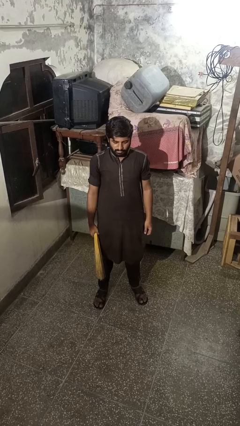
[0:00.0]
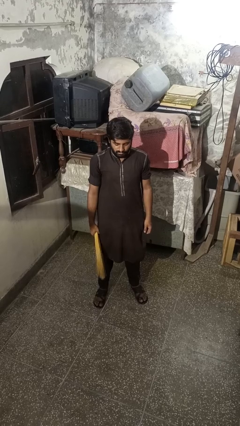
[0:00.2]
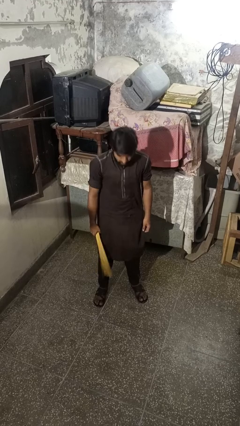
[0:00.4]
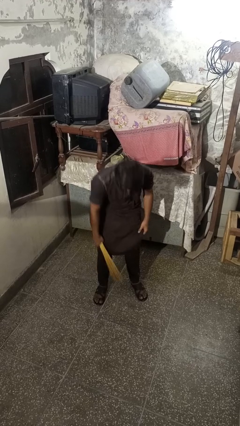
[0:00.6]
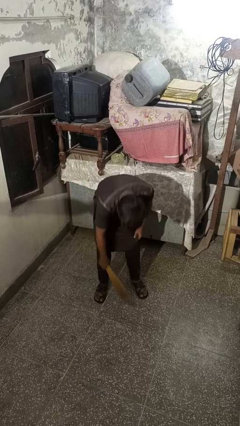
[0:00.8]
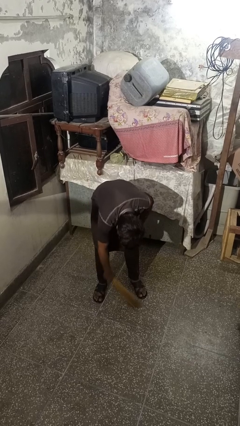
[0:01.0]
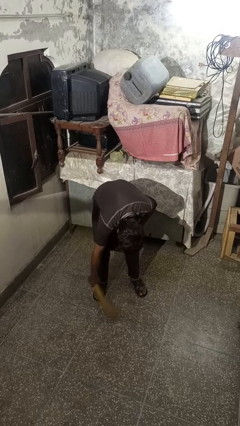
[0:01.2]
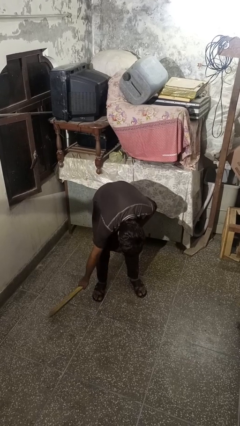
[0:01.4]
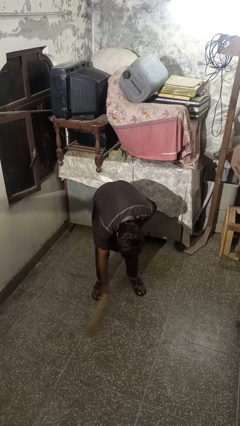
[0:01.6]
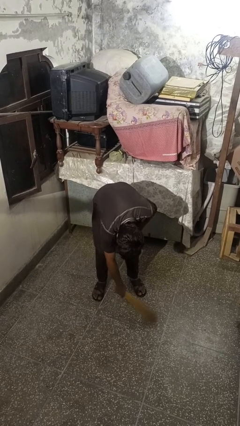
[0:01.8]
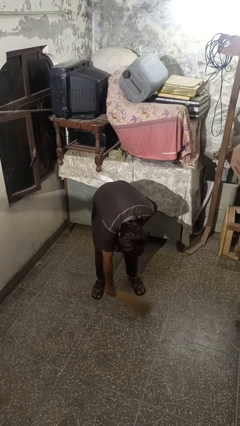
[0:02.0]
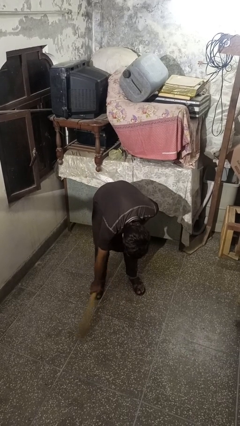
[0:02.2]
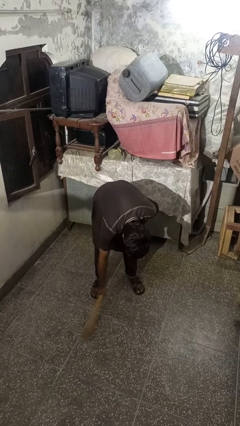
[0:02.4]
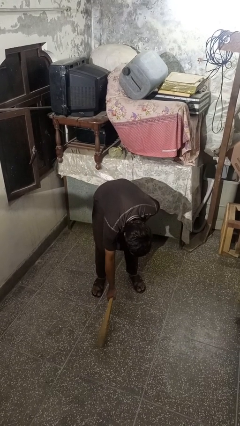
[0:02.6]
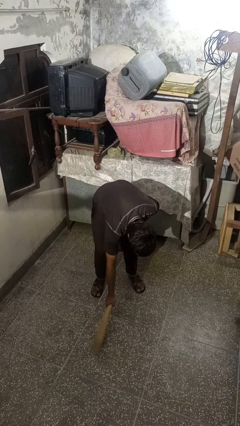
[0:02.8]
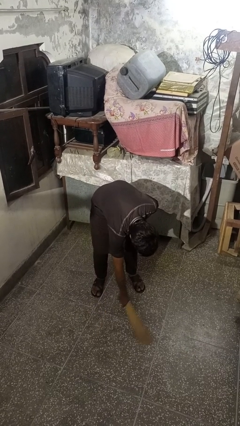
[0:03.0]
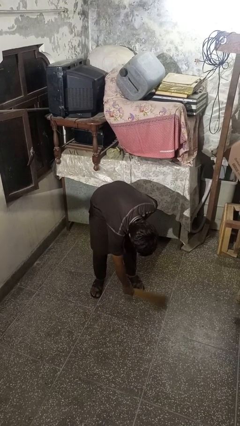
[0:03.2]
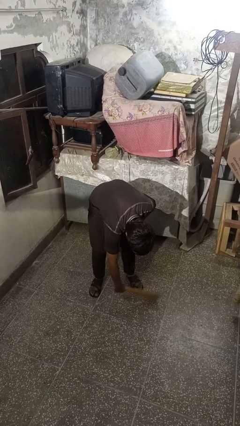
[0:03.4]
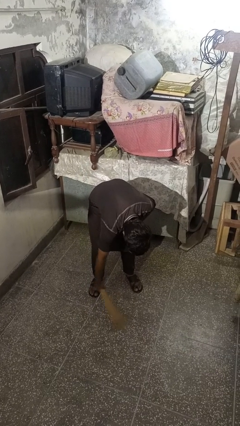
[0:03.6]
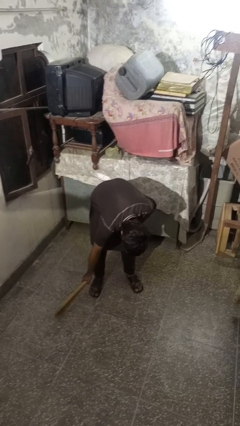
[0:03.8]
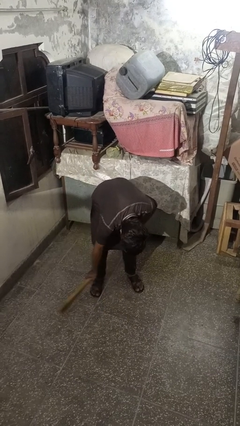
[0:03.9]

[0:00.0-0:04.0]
person sweeps floor

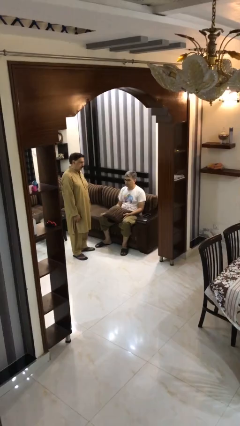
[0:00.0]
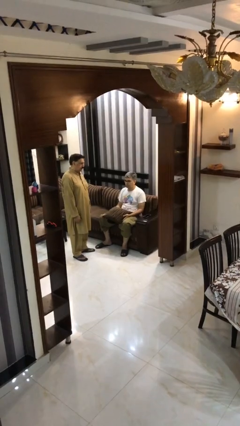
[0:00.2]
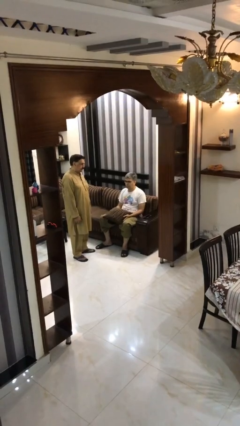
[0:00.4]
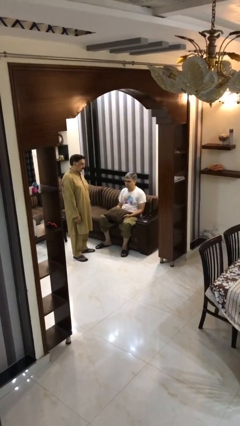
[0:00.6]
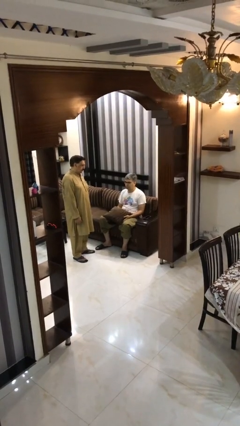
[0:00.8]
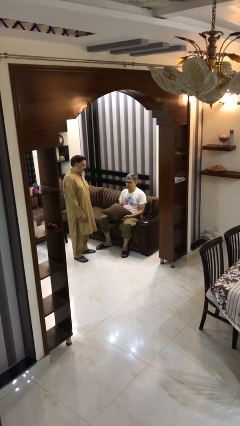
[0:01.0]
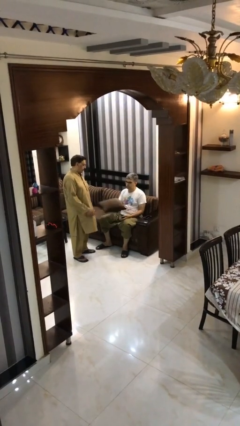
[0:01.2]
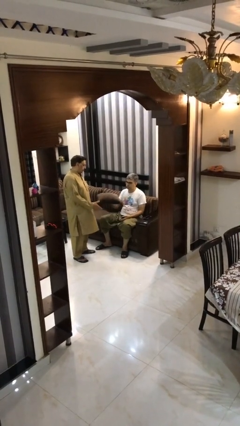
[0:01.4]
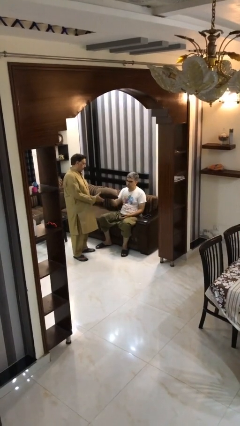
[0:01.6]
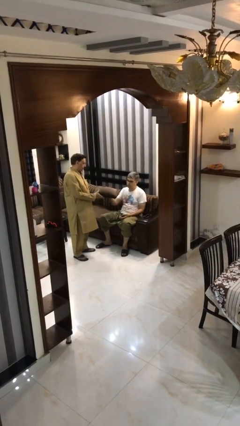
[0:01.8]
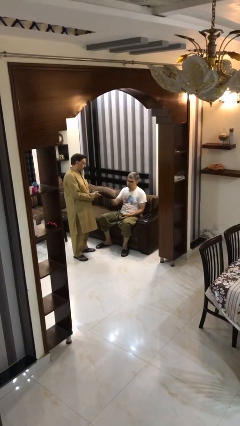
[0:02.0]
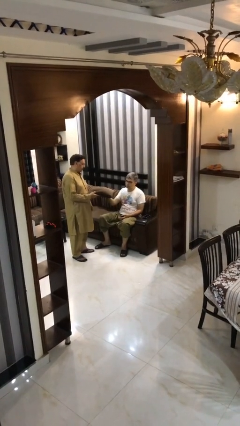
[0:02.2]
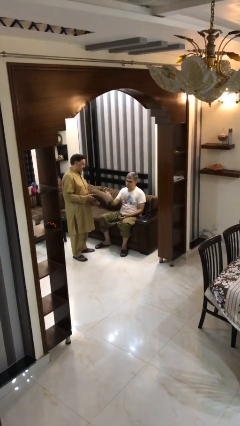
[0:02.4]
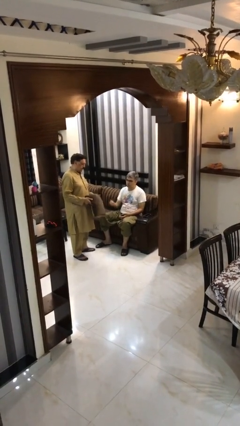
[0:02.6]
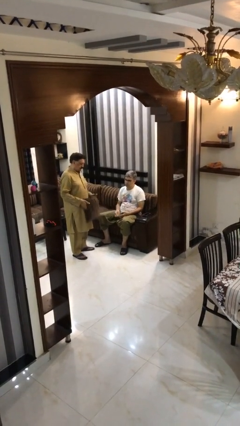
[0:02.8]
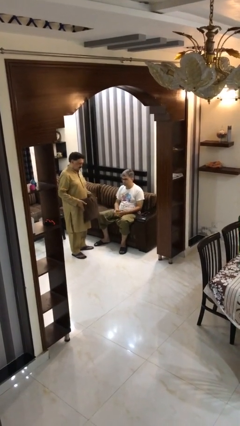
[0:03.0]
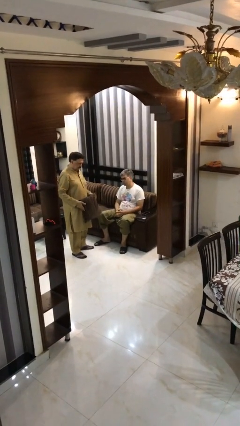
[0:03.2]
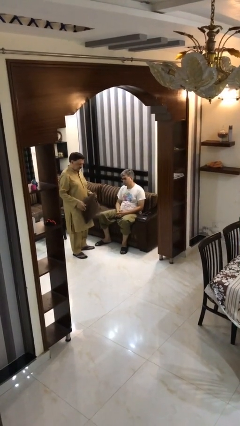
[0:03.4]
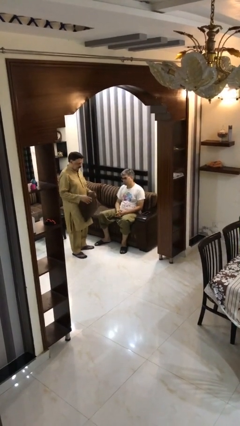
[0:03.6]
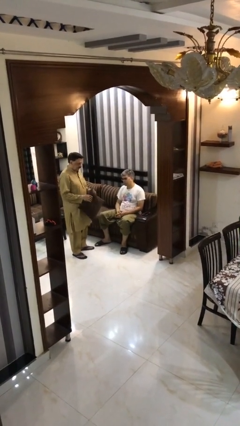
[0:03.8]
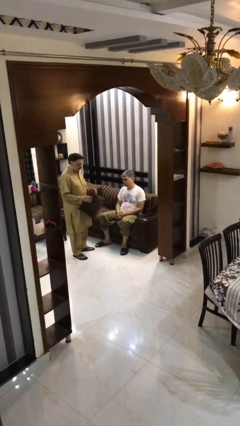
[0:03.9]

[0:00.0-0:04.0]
person transfers object to person

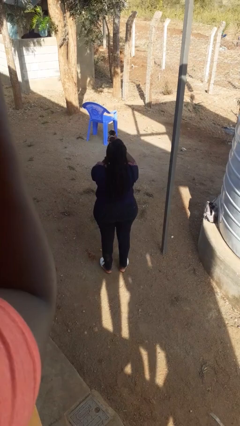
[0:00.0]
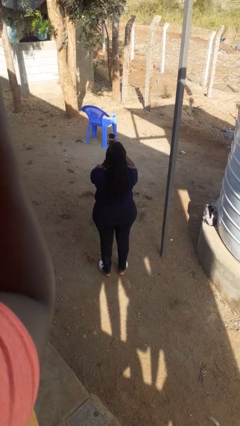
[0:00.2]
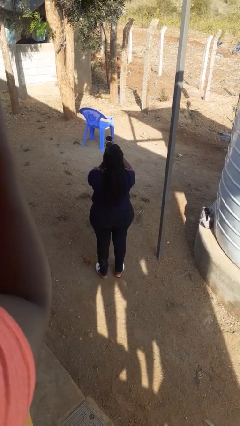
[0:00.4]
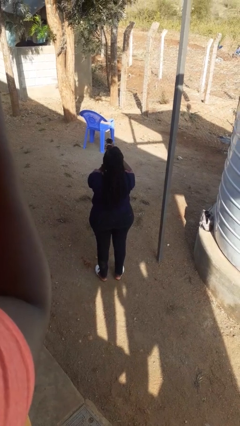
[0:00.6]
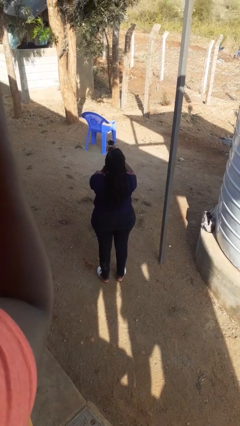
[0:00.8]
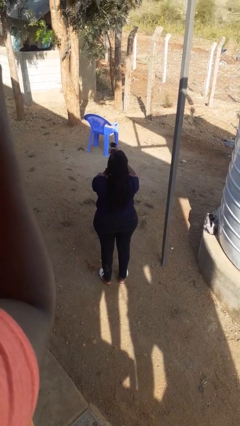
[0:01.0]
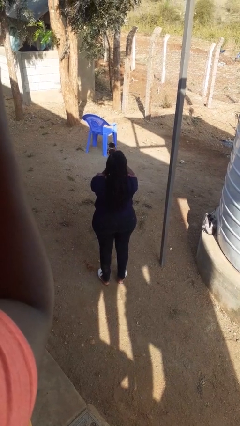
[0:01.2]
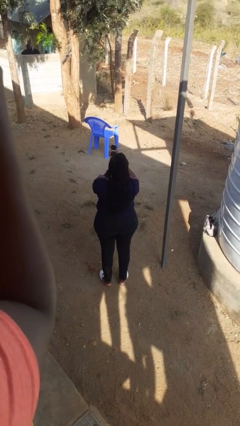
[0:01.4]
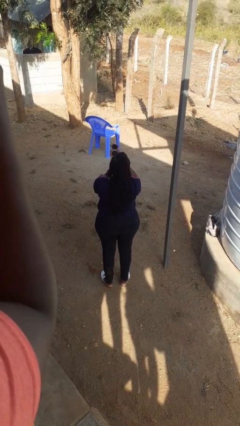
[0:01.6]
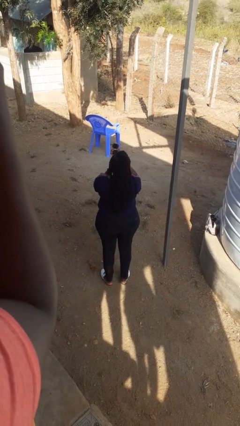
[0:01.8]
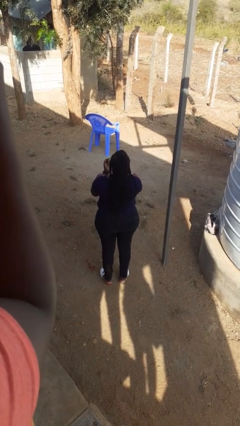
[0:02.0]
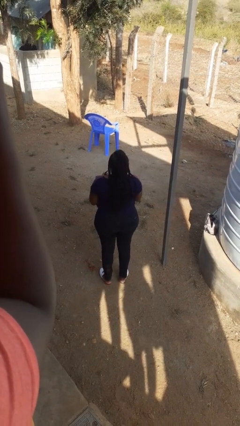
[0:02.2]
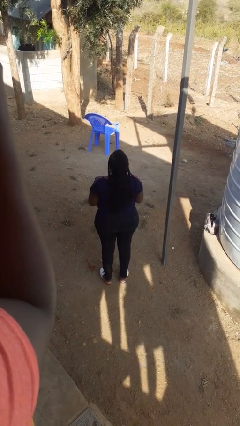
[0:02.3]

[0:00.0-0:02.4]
person applies eye makeup

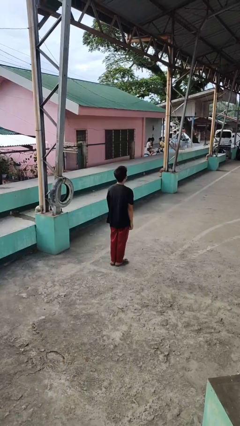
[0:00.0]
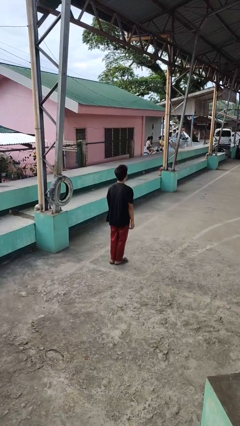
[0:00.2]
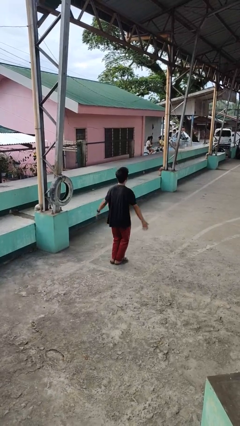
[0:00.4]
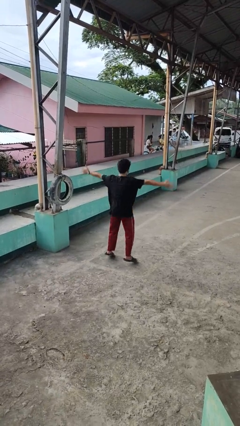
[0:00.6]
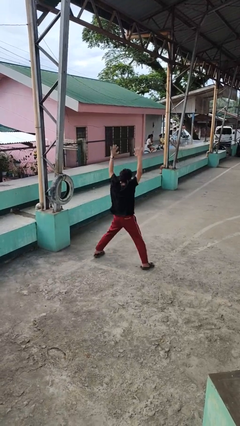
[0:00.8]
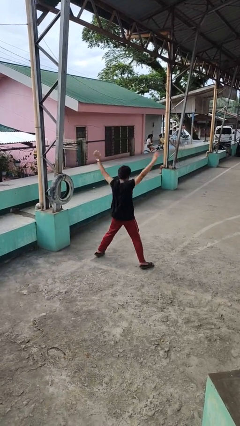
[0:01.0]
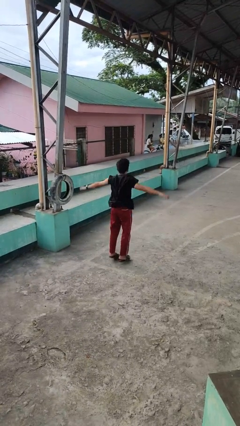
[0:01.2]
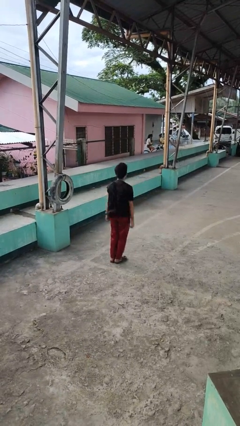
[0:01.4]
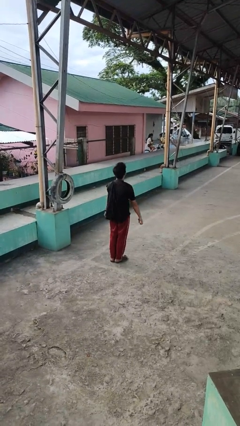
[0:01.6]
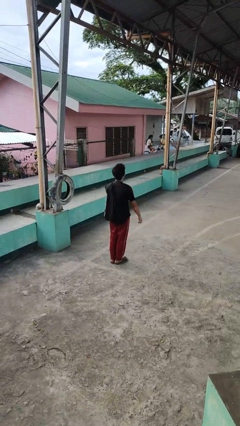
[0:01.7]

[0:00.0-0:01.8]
person exercises with jumping jacks

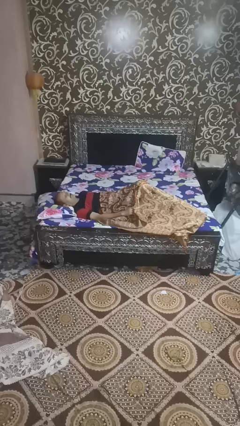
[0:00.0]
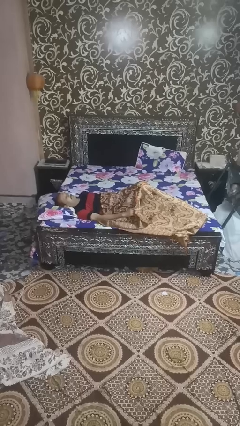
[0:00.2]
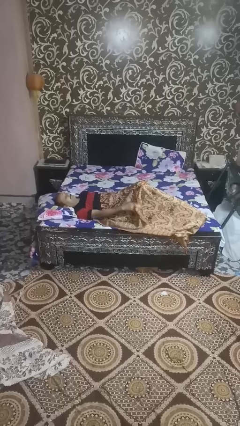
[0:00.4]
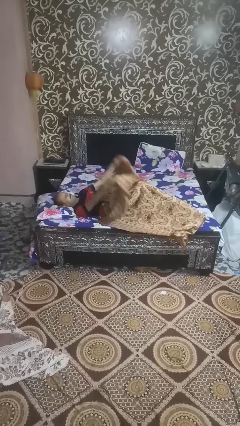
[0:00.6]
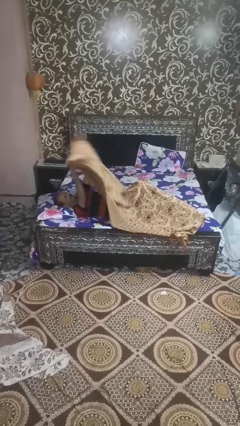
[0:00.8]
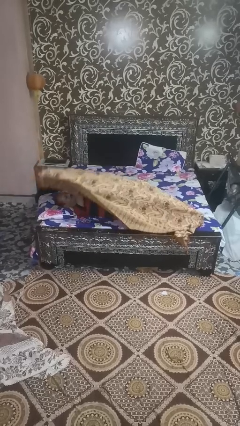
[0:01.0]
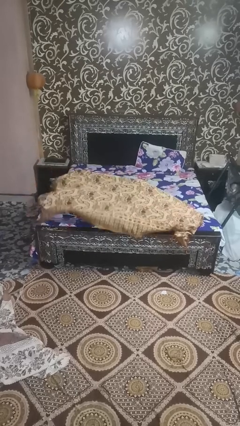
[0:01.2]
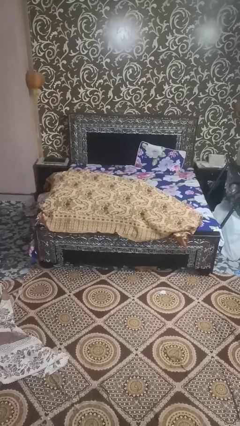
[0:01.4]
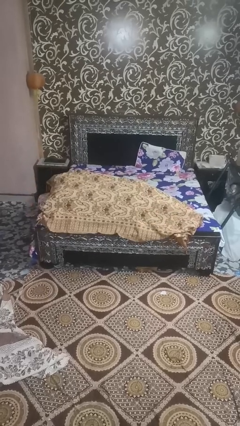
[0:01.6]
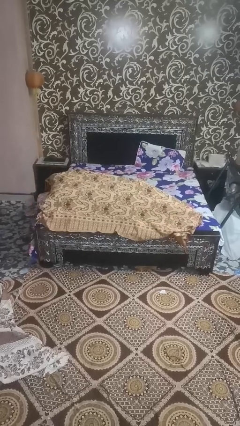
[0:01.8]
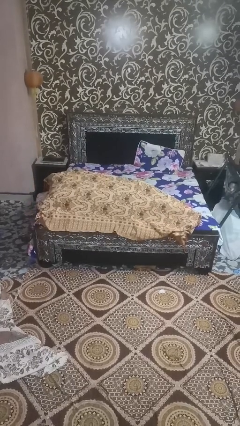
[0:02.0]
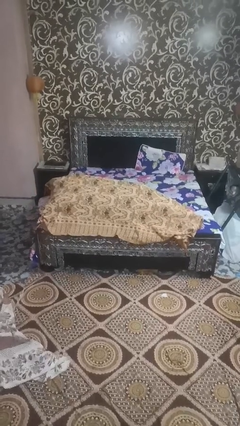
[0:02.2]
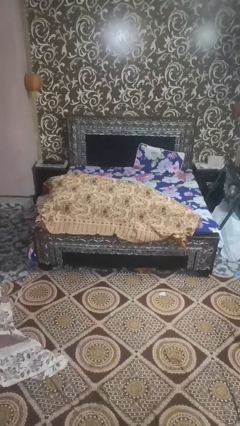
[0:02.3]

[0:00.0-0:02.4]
person covers with blanket

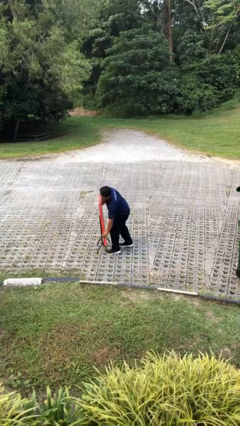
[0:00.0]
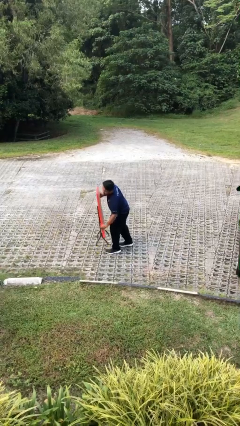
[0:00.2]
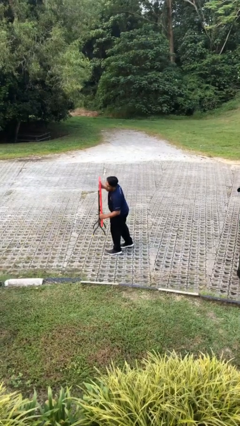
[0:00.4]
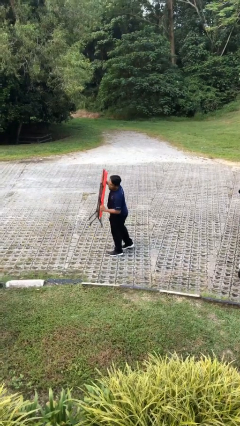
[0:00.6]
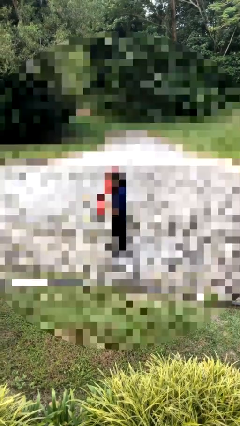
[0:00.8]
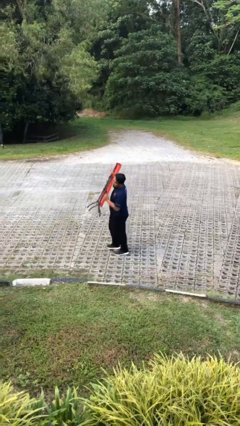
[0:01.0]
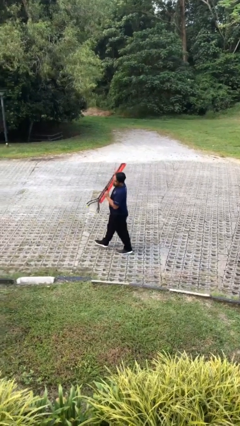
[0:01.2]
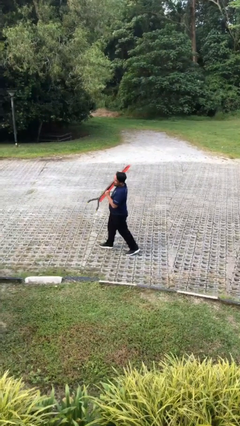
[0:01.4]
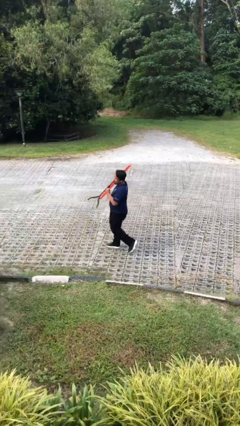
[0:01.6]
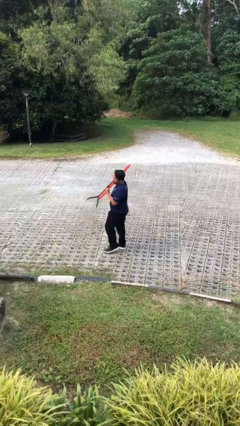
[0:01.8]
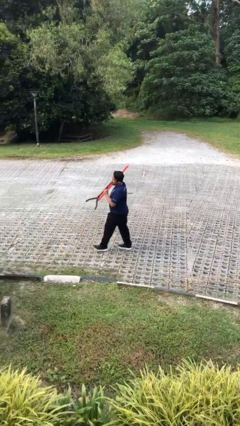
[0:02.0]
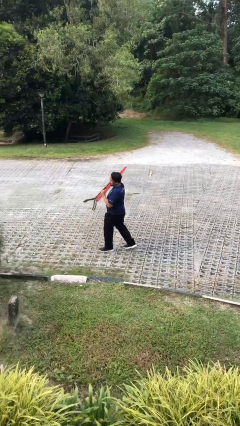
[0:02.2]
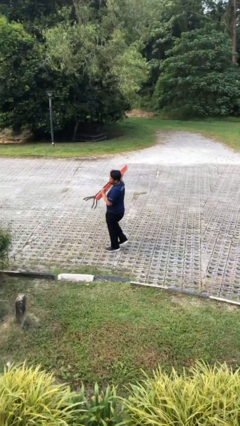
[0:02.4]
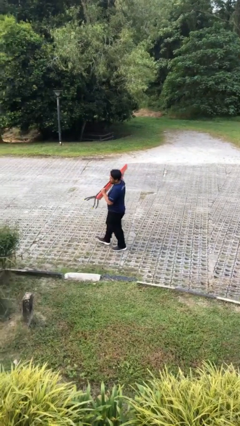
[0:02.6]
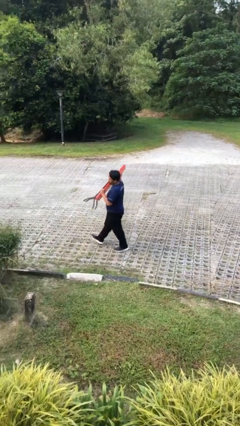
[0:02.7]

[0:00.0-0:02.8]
person carries heavy object
